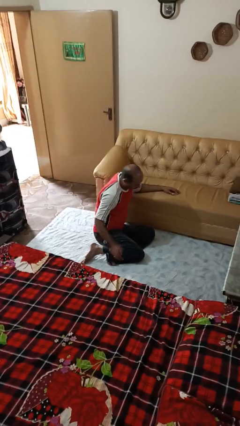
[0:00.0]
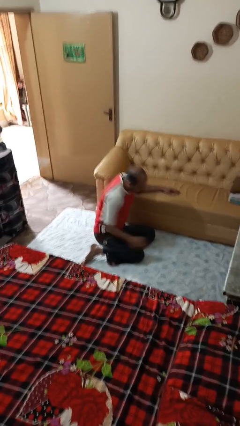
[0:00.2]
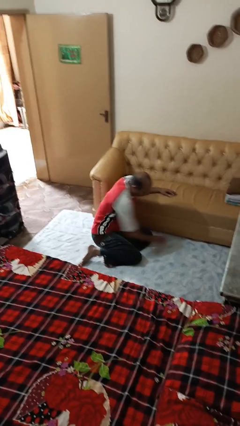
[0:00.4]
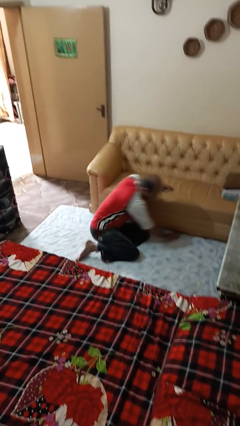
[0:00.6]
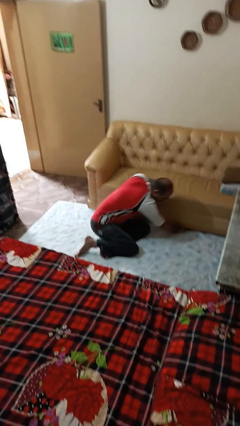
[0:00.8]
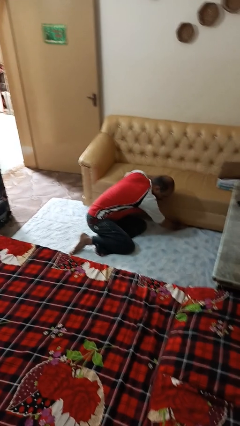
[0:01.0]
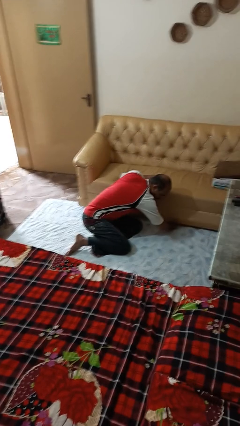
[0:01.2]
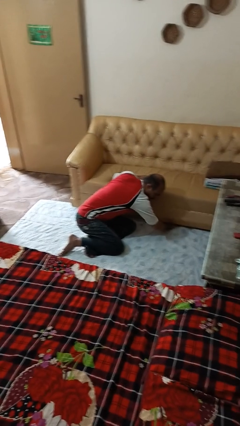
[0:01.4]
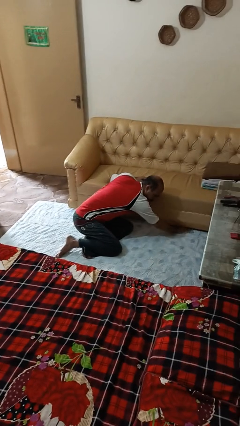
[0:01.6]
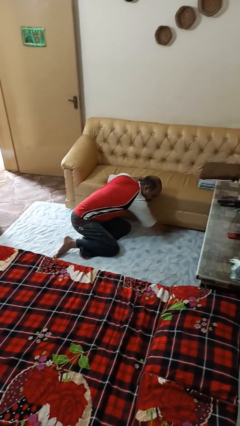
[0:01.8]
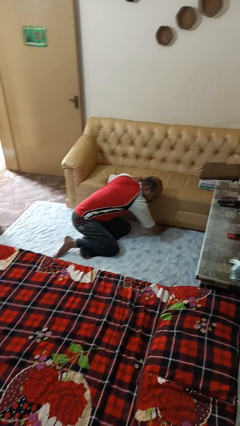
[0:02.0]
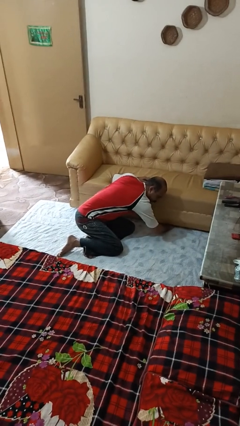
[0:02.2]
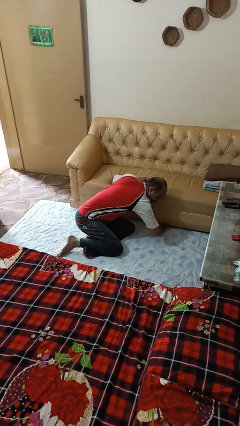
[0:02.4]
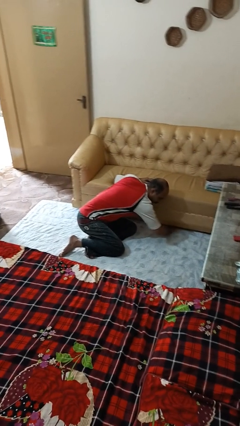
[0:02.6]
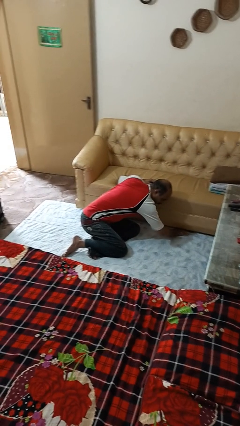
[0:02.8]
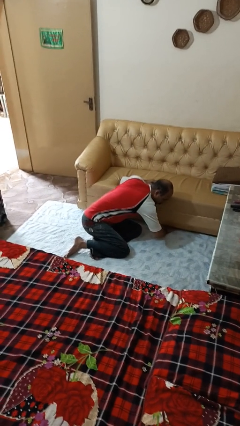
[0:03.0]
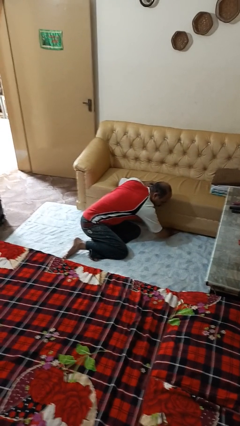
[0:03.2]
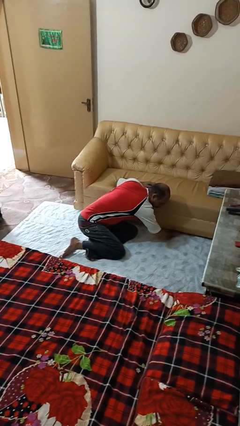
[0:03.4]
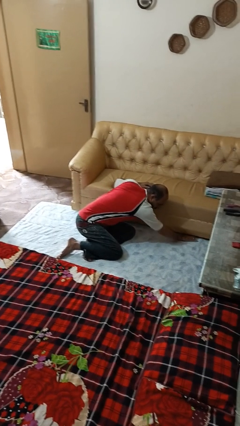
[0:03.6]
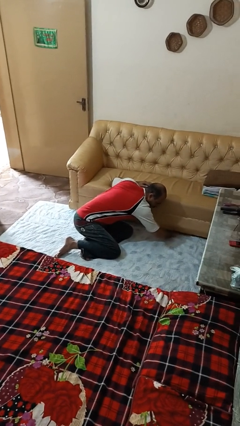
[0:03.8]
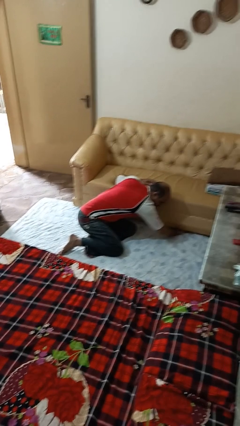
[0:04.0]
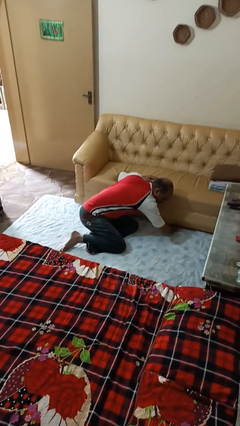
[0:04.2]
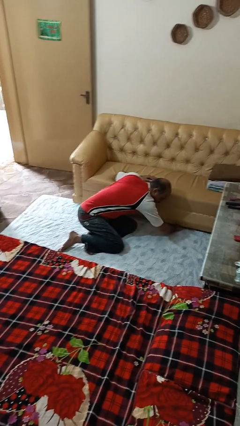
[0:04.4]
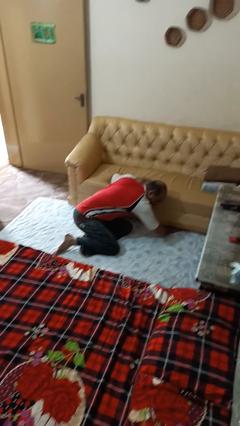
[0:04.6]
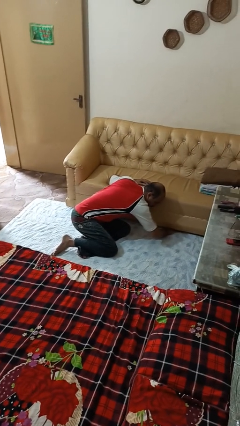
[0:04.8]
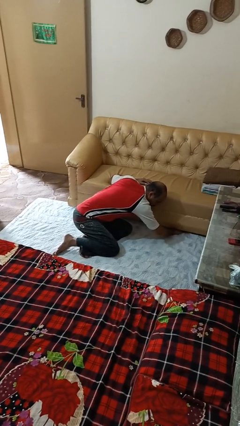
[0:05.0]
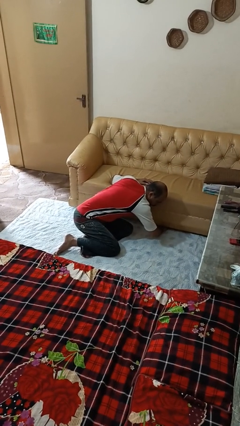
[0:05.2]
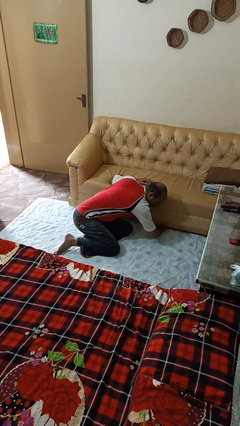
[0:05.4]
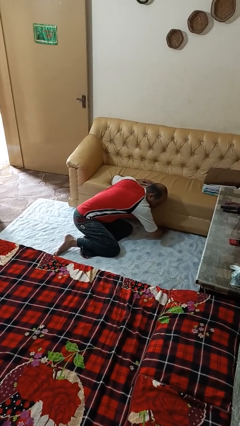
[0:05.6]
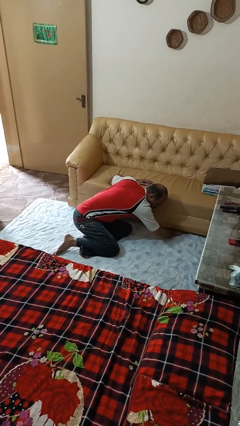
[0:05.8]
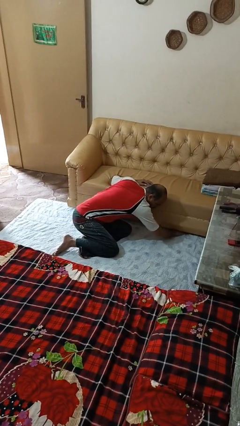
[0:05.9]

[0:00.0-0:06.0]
person searches under couch

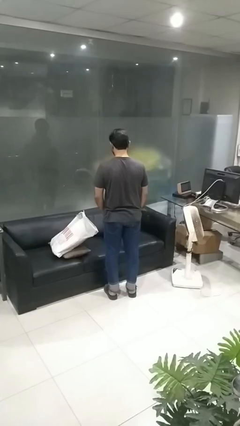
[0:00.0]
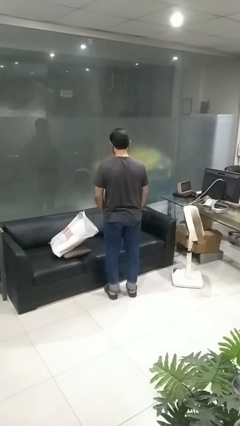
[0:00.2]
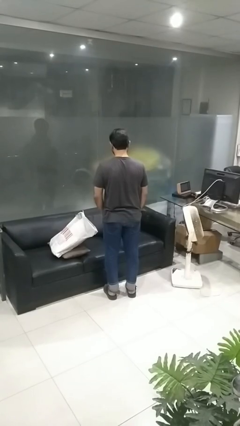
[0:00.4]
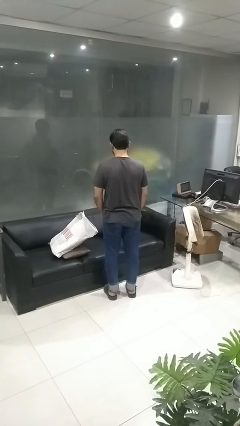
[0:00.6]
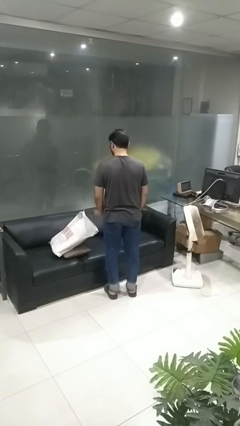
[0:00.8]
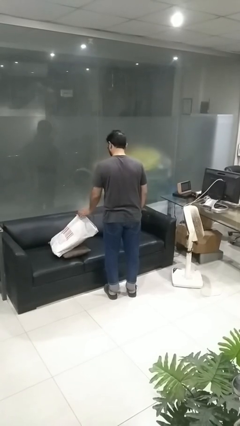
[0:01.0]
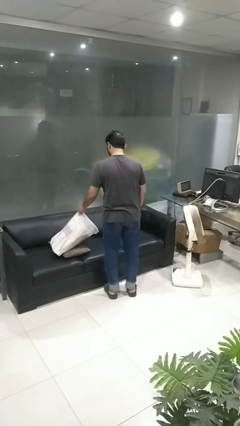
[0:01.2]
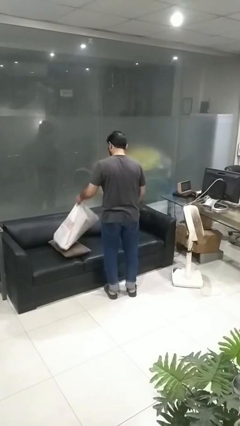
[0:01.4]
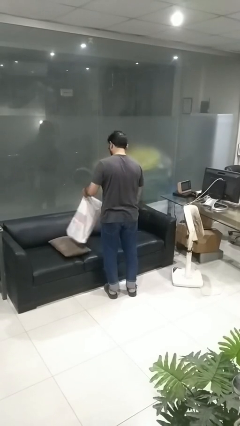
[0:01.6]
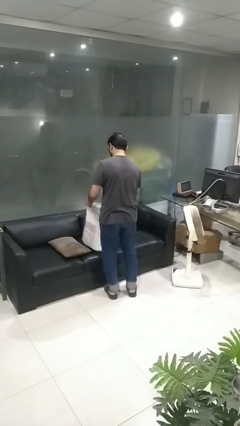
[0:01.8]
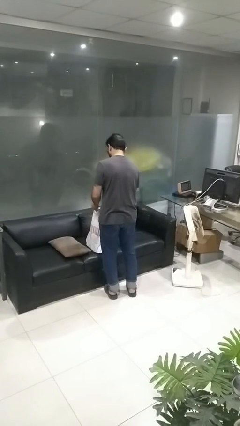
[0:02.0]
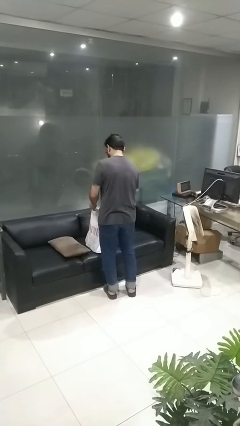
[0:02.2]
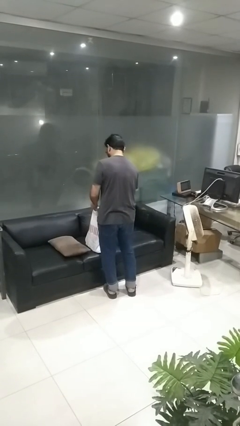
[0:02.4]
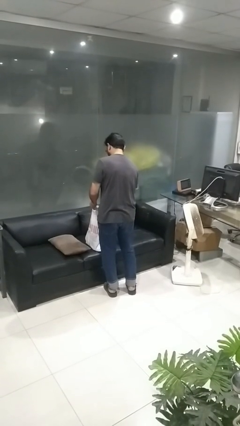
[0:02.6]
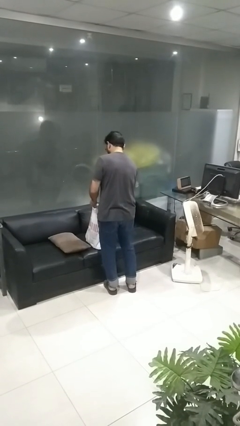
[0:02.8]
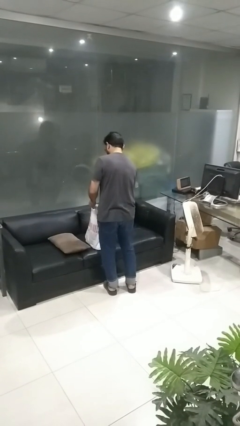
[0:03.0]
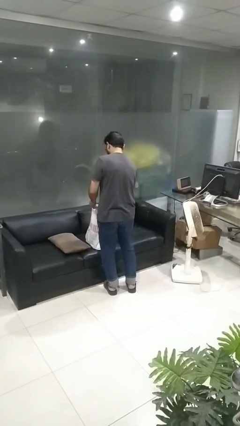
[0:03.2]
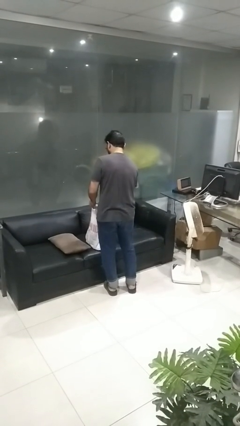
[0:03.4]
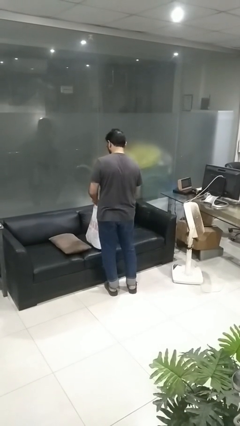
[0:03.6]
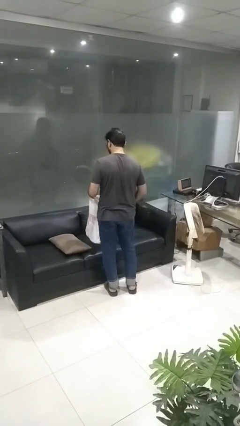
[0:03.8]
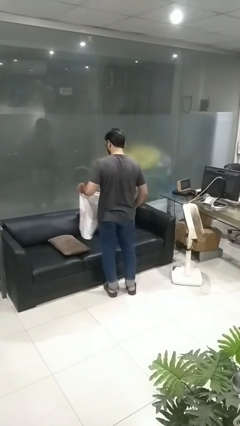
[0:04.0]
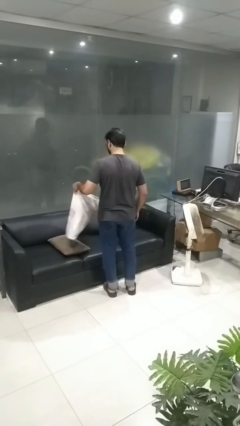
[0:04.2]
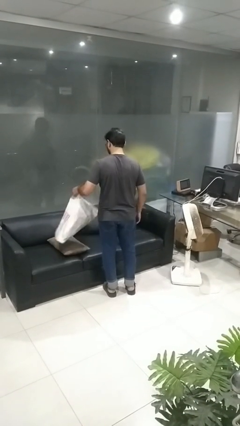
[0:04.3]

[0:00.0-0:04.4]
person searches in bag

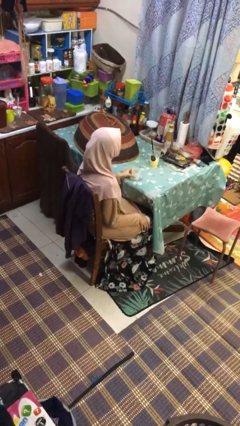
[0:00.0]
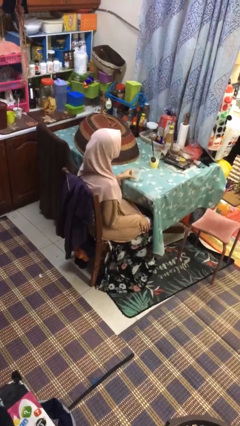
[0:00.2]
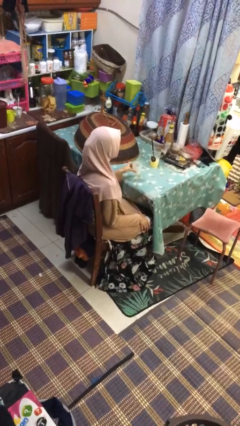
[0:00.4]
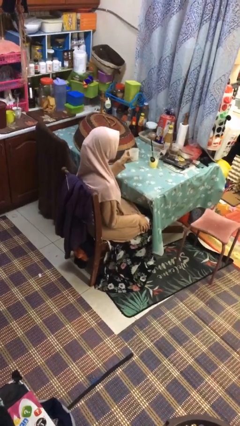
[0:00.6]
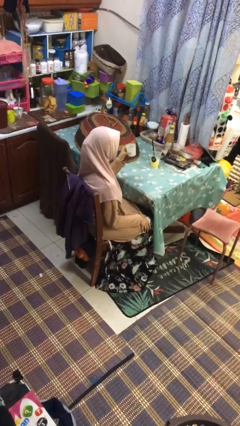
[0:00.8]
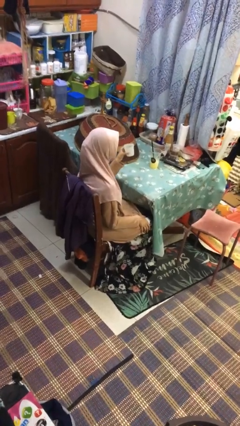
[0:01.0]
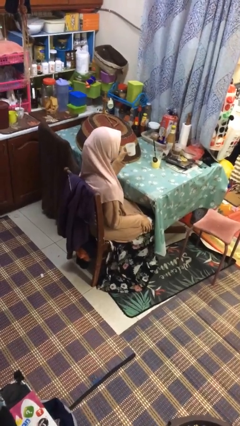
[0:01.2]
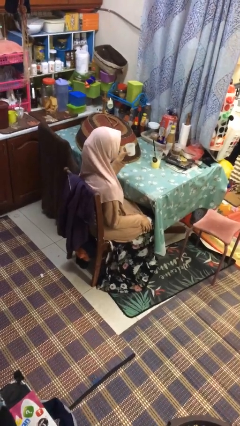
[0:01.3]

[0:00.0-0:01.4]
person picks up object from table

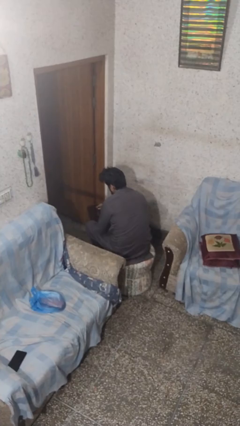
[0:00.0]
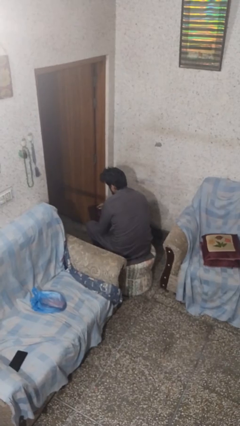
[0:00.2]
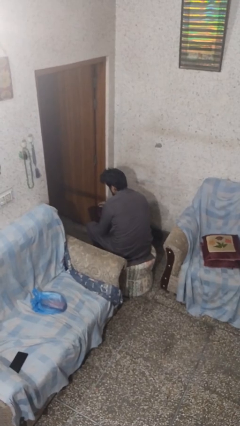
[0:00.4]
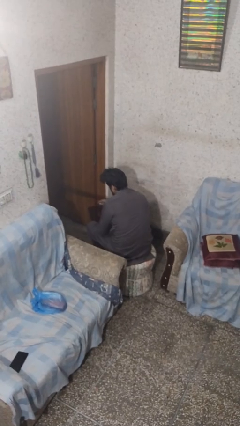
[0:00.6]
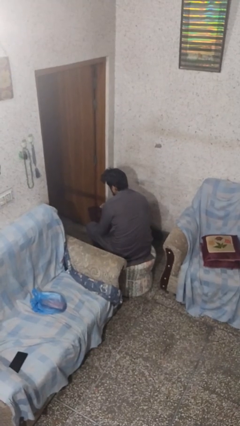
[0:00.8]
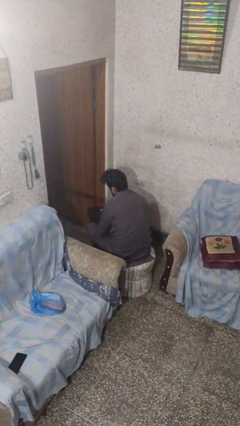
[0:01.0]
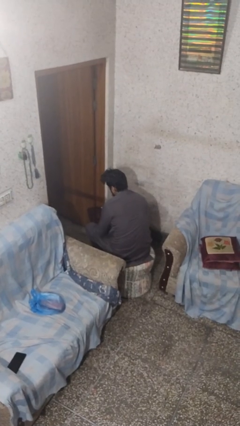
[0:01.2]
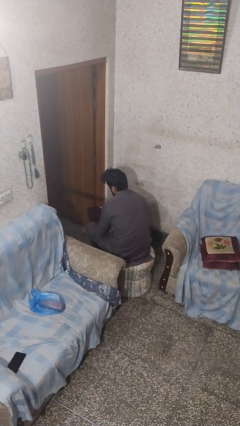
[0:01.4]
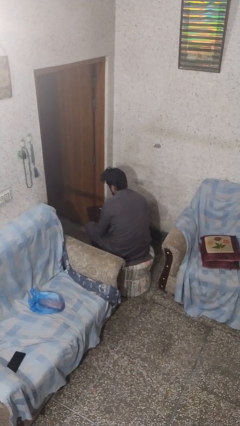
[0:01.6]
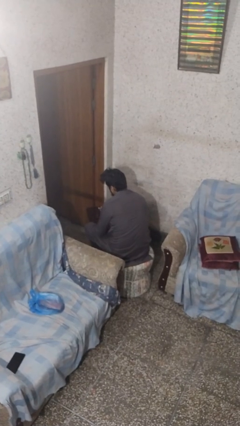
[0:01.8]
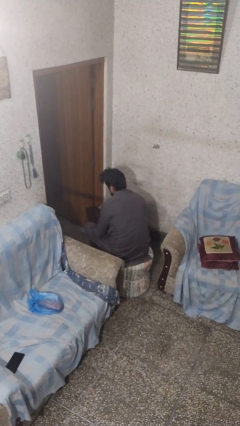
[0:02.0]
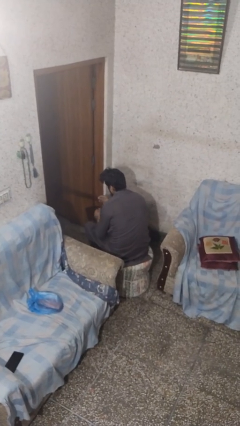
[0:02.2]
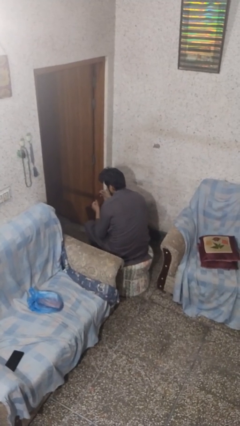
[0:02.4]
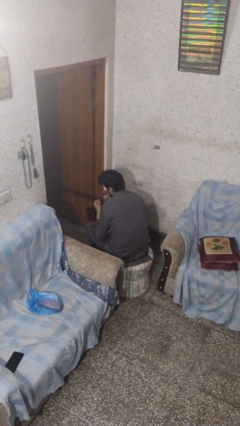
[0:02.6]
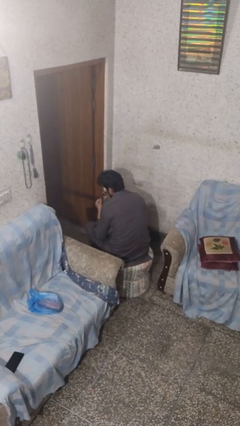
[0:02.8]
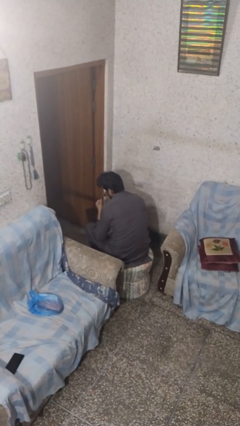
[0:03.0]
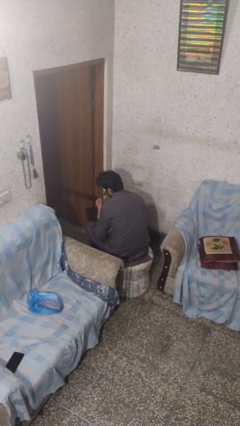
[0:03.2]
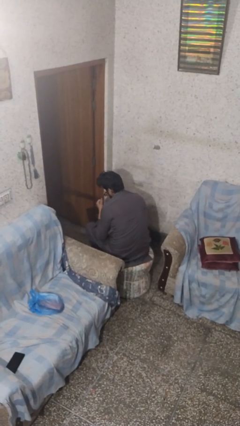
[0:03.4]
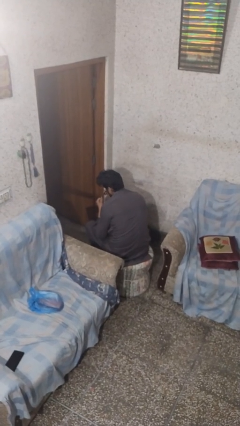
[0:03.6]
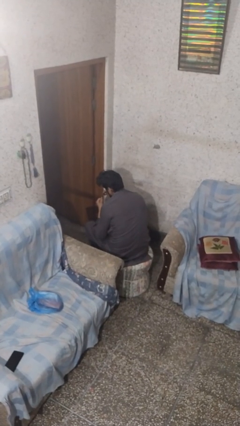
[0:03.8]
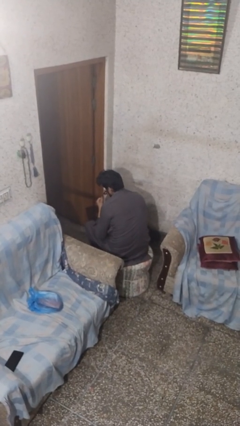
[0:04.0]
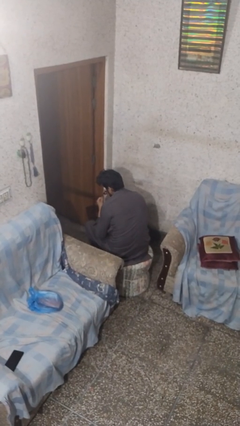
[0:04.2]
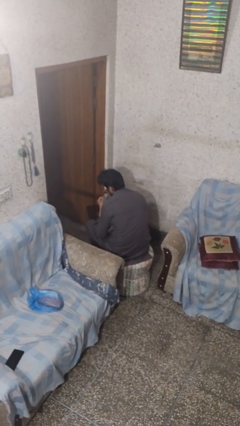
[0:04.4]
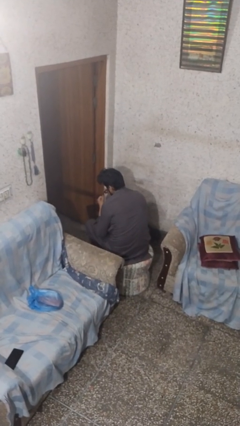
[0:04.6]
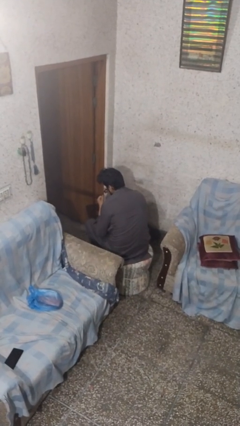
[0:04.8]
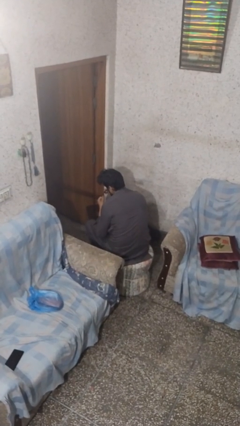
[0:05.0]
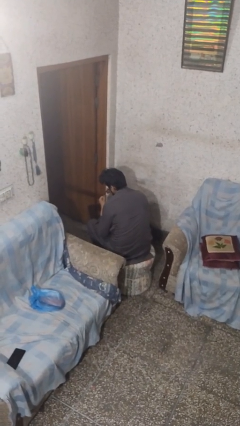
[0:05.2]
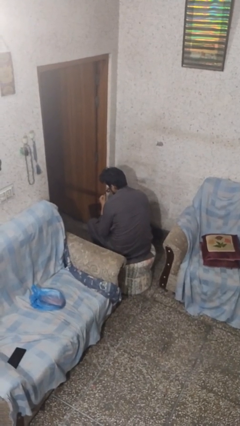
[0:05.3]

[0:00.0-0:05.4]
person paints fingernails

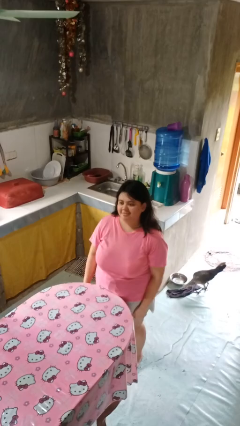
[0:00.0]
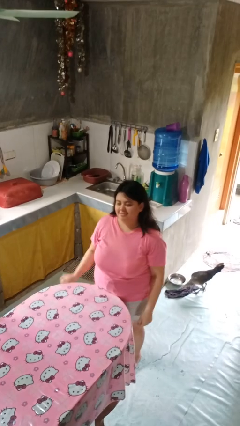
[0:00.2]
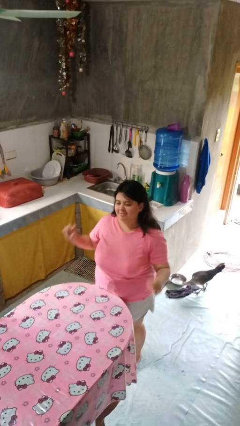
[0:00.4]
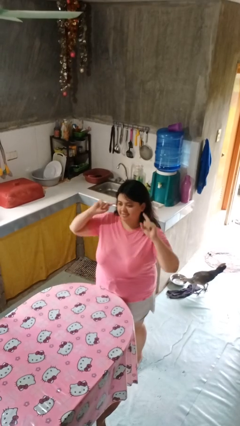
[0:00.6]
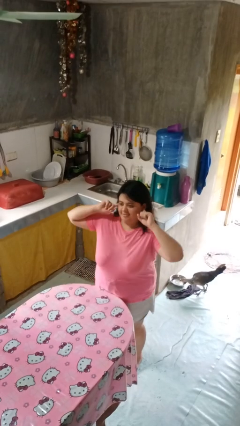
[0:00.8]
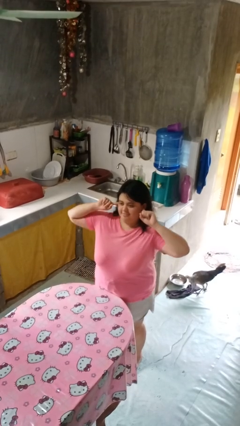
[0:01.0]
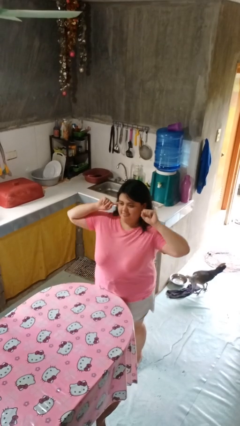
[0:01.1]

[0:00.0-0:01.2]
person puts fingers in ear
